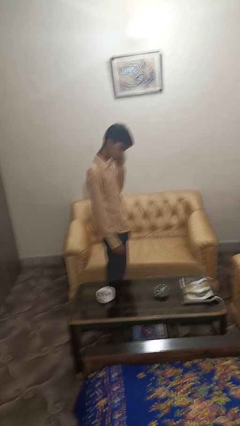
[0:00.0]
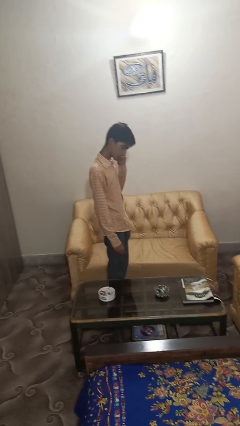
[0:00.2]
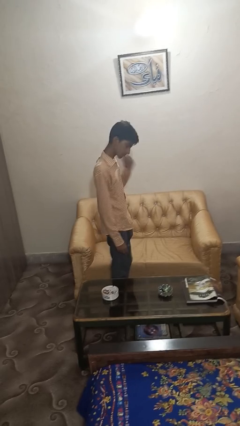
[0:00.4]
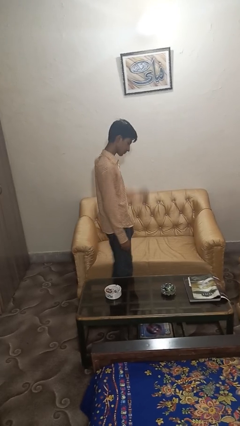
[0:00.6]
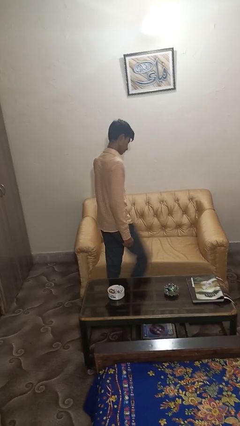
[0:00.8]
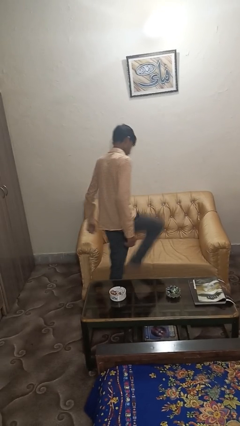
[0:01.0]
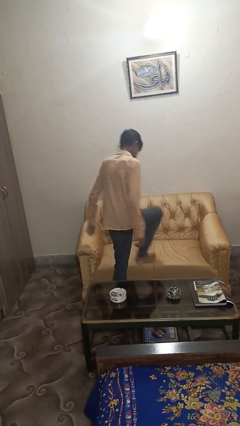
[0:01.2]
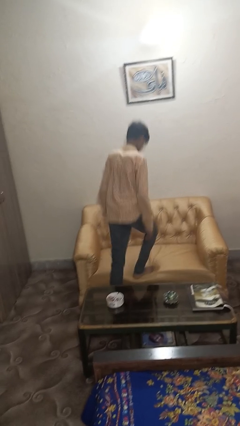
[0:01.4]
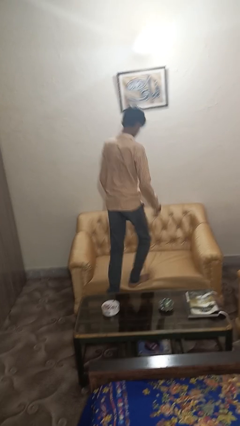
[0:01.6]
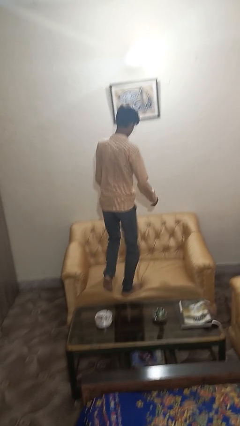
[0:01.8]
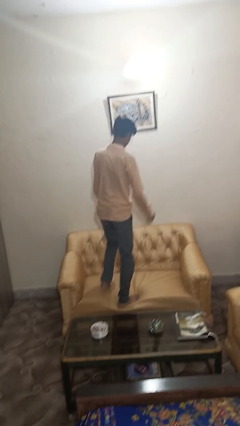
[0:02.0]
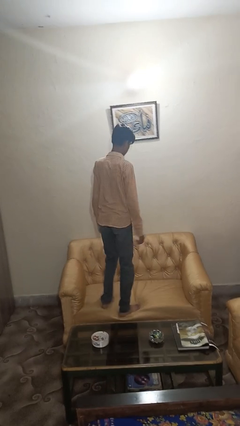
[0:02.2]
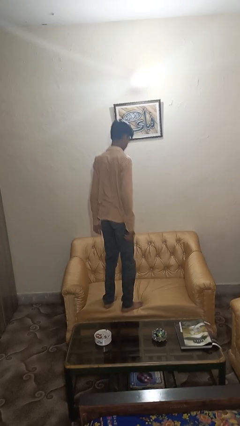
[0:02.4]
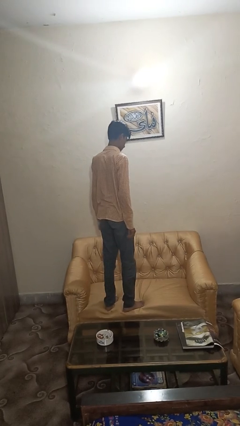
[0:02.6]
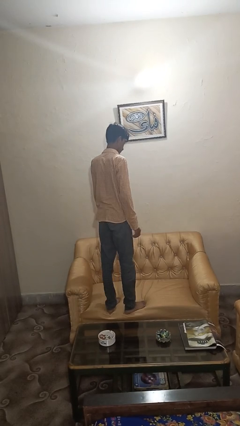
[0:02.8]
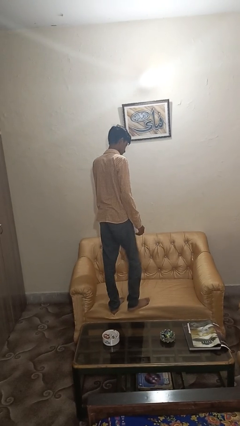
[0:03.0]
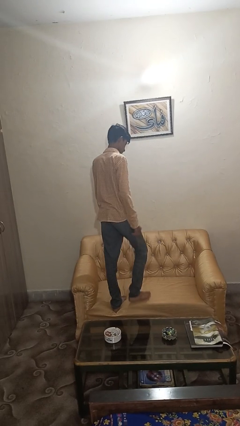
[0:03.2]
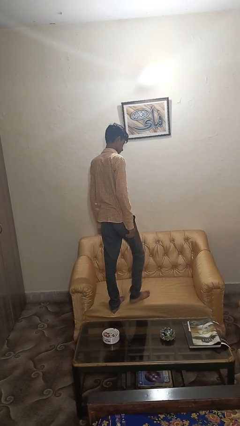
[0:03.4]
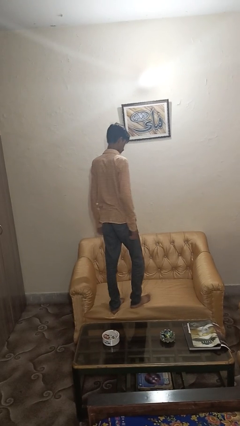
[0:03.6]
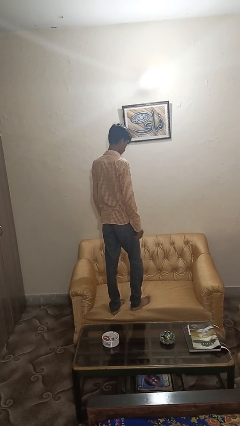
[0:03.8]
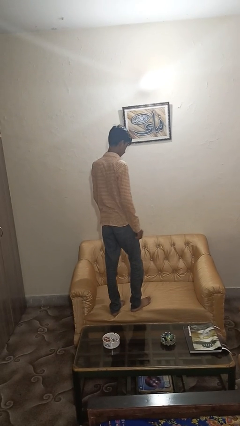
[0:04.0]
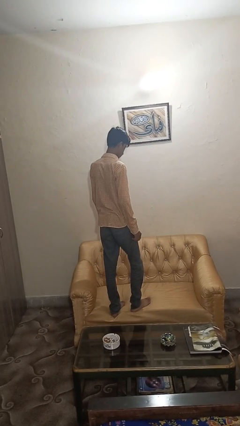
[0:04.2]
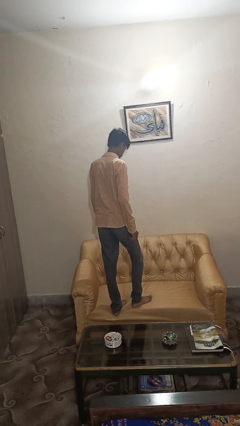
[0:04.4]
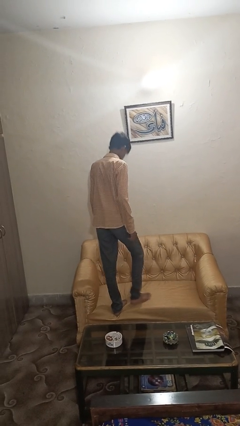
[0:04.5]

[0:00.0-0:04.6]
person climbs on couch

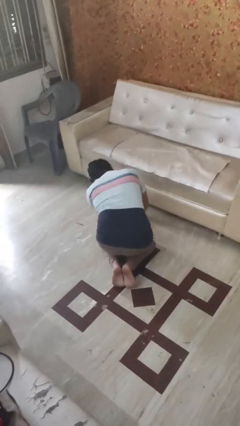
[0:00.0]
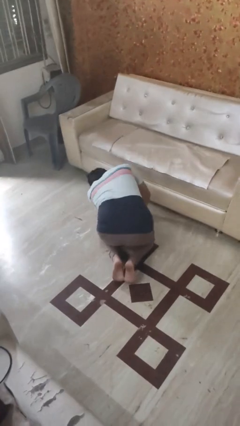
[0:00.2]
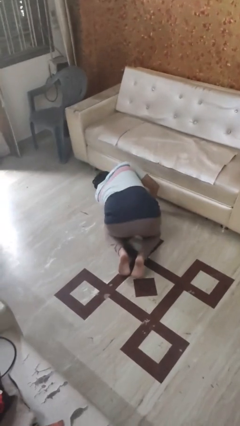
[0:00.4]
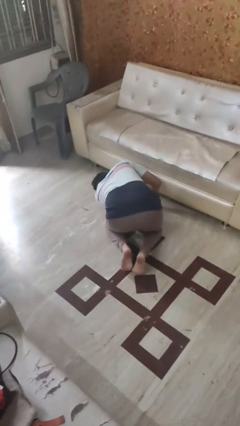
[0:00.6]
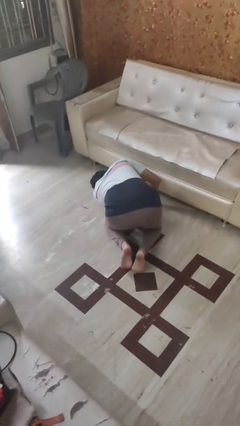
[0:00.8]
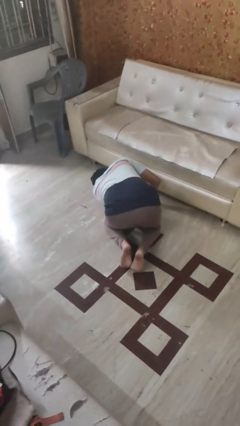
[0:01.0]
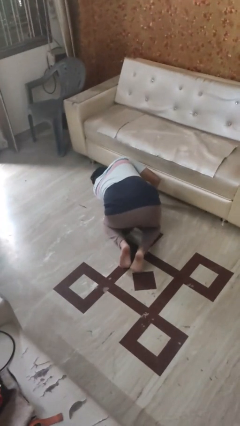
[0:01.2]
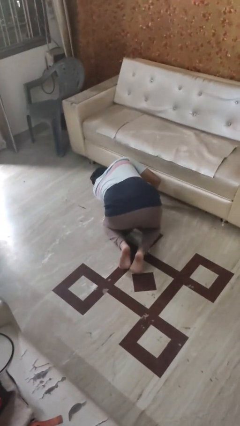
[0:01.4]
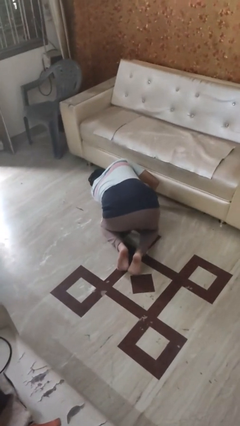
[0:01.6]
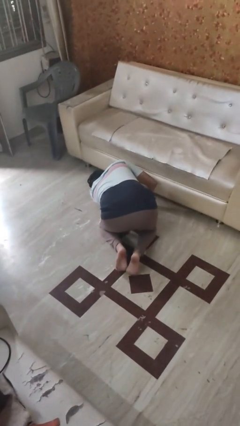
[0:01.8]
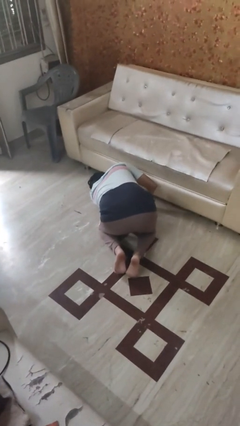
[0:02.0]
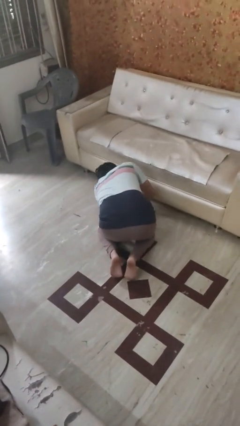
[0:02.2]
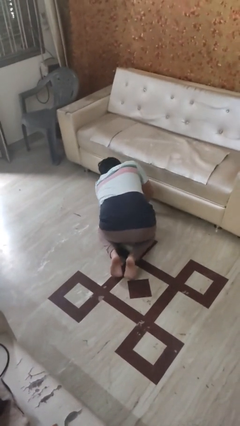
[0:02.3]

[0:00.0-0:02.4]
person searches under bed

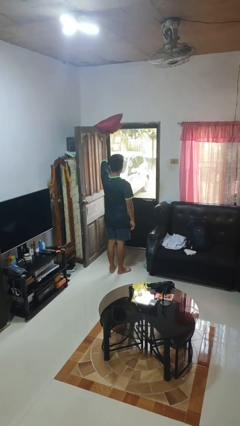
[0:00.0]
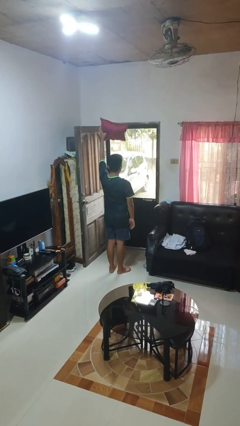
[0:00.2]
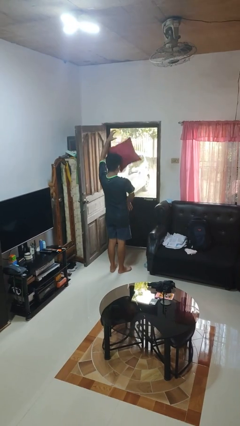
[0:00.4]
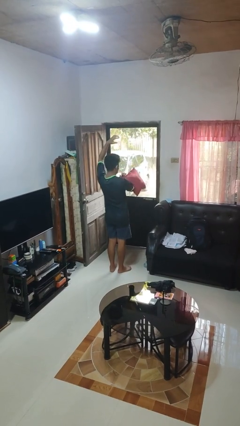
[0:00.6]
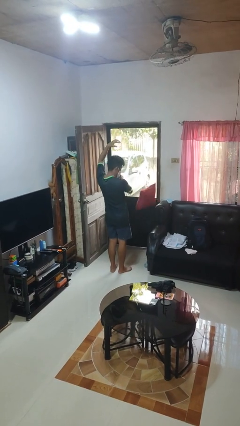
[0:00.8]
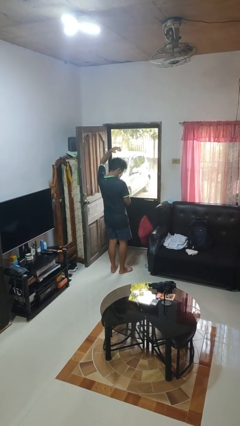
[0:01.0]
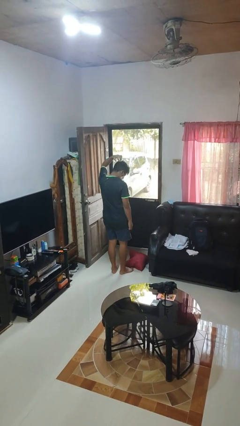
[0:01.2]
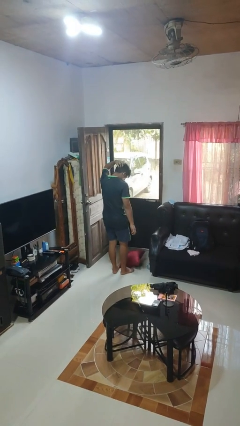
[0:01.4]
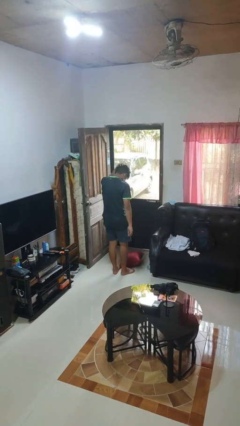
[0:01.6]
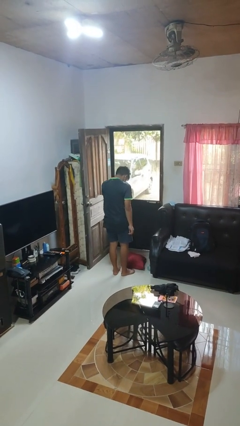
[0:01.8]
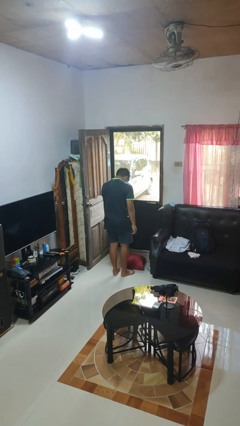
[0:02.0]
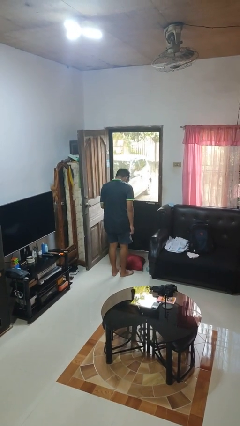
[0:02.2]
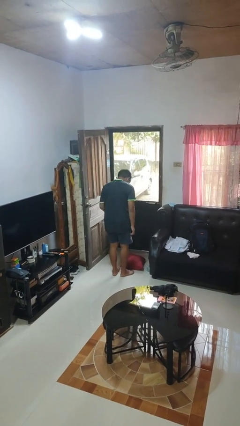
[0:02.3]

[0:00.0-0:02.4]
person drops object

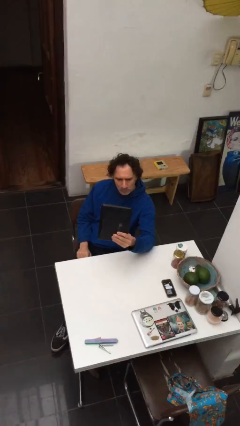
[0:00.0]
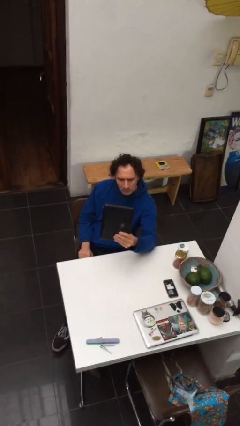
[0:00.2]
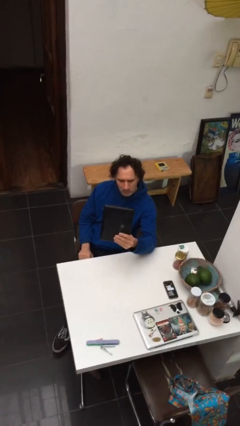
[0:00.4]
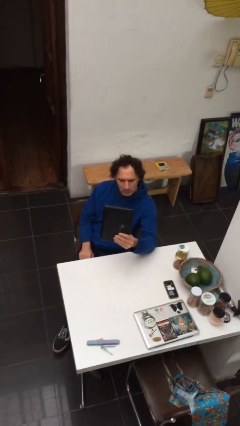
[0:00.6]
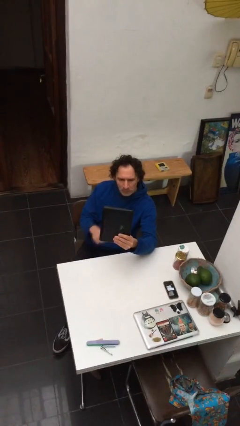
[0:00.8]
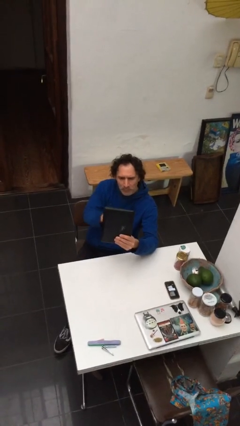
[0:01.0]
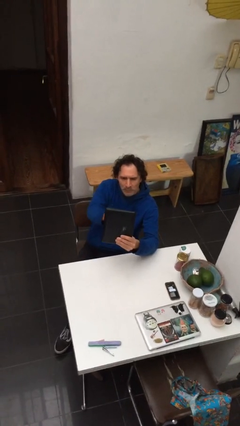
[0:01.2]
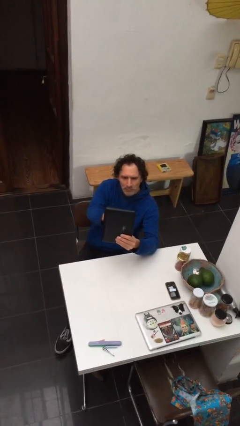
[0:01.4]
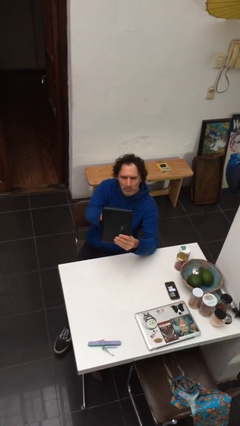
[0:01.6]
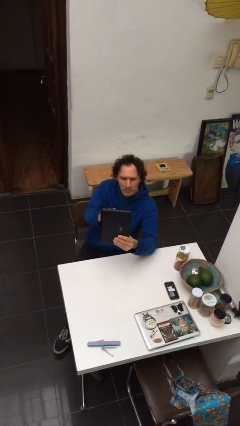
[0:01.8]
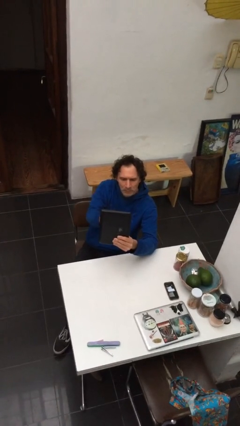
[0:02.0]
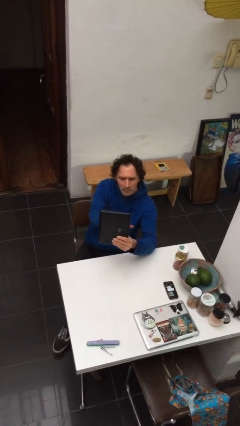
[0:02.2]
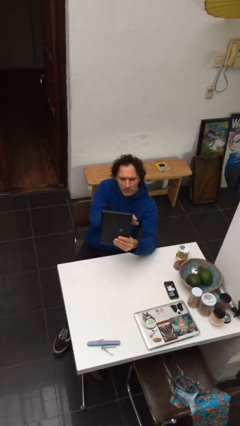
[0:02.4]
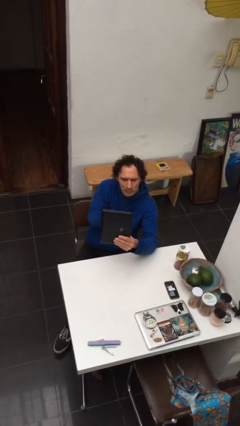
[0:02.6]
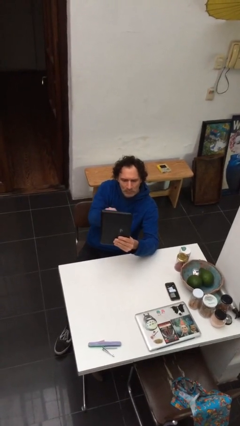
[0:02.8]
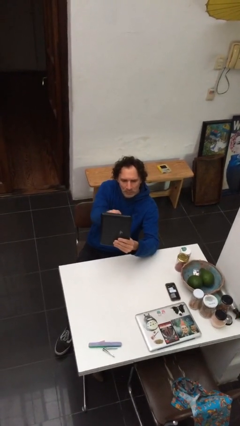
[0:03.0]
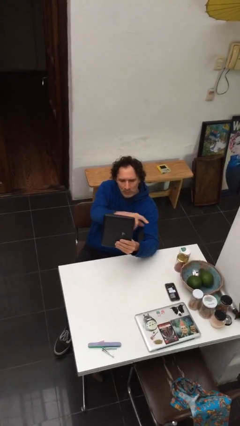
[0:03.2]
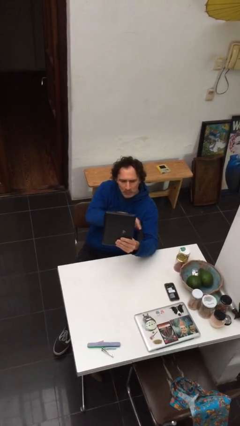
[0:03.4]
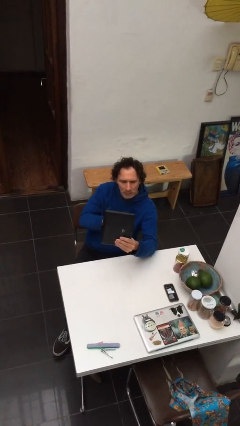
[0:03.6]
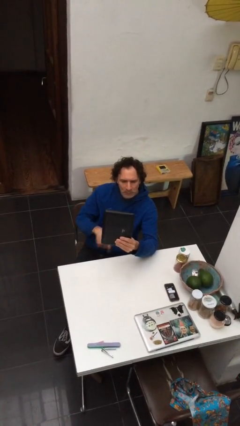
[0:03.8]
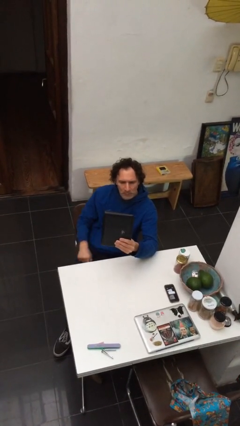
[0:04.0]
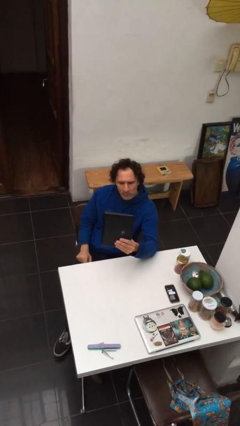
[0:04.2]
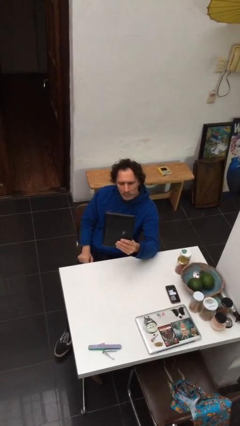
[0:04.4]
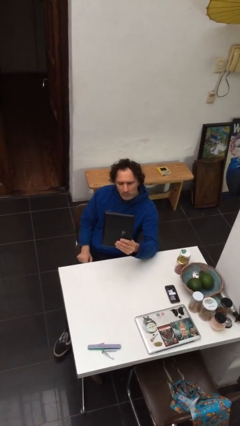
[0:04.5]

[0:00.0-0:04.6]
person interacts with tablet

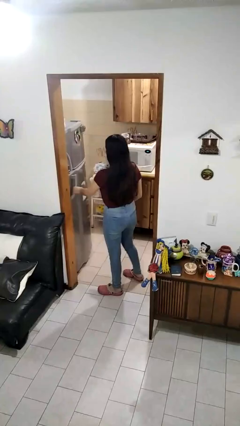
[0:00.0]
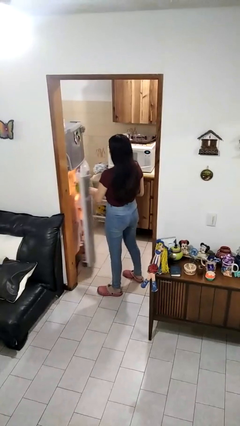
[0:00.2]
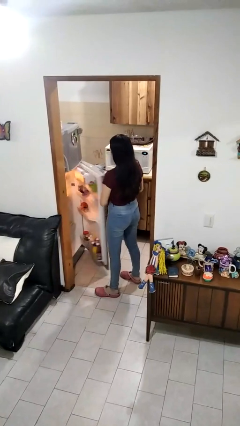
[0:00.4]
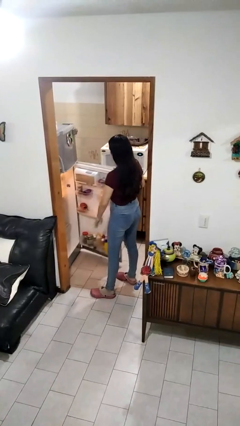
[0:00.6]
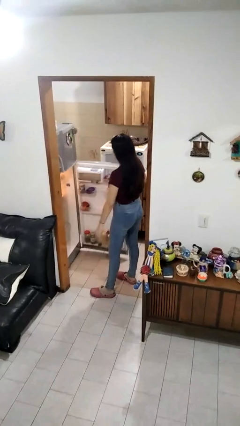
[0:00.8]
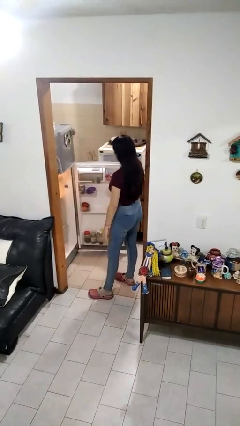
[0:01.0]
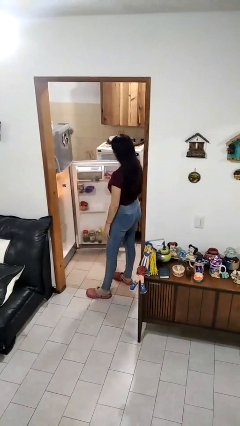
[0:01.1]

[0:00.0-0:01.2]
person opens refrigerator

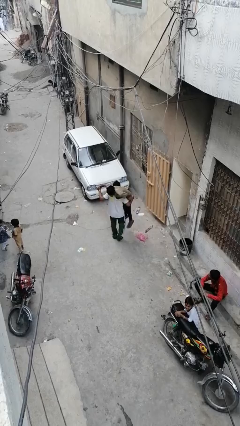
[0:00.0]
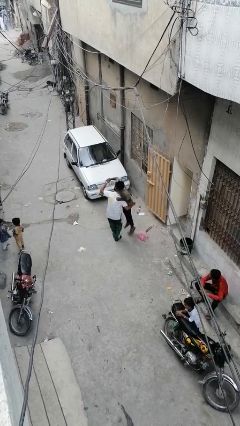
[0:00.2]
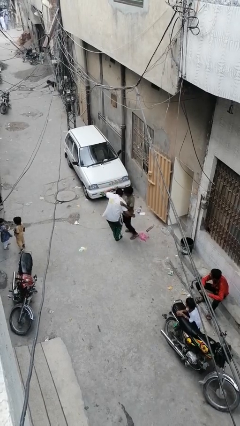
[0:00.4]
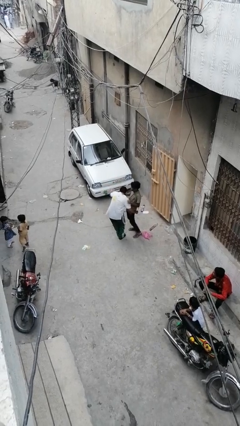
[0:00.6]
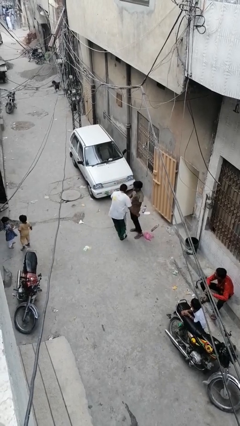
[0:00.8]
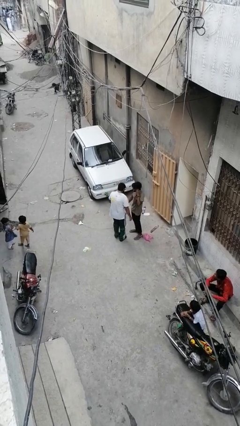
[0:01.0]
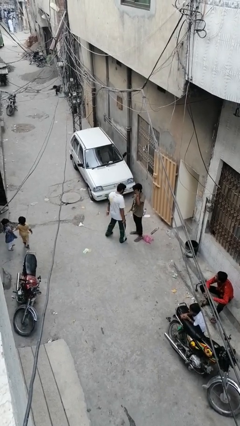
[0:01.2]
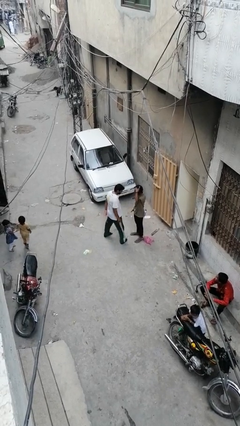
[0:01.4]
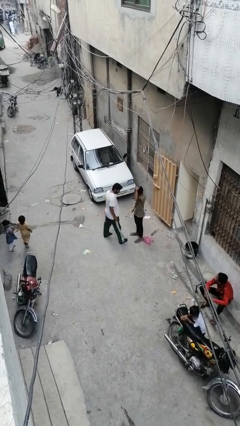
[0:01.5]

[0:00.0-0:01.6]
person puts down person
